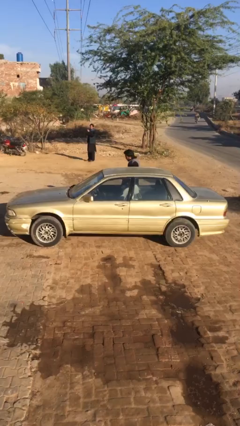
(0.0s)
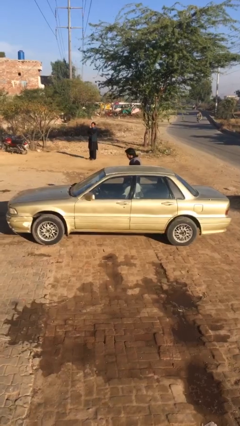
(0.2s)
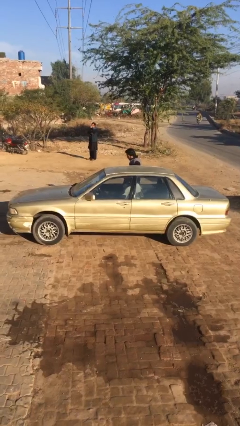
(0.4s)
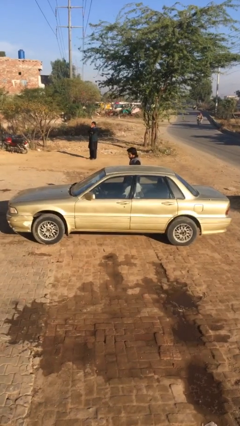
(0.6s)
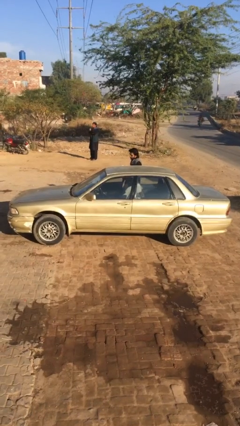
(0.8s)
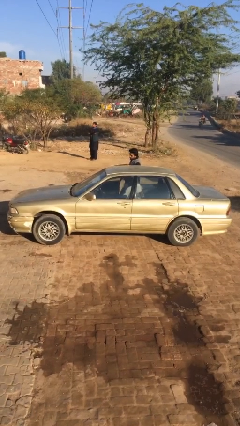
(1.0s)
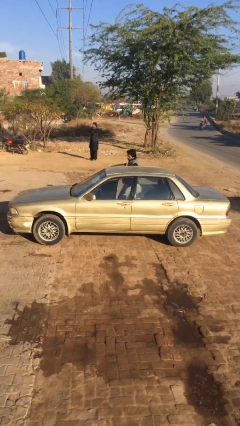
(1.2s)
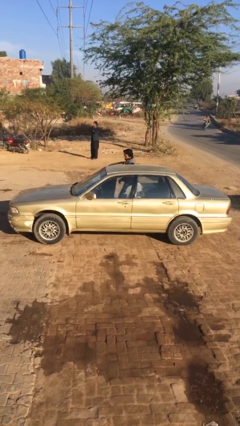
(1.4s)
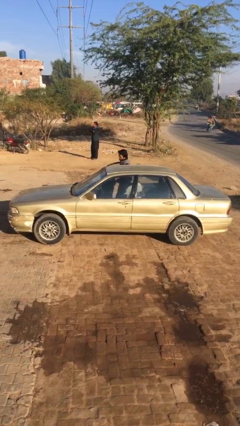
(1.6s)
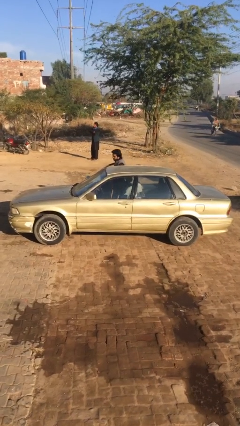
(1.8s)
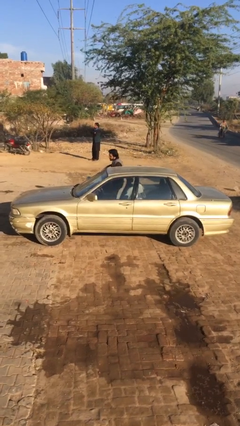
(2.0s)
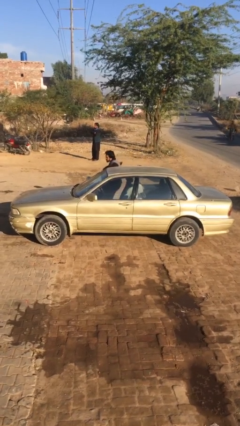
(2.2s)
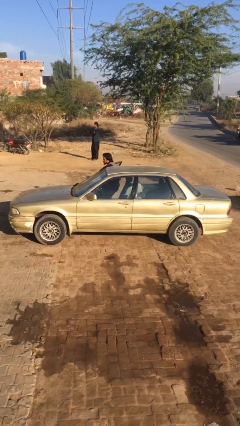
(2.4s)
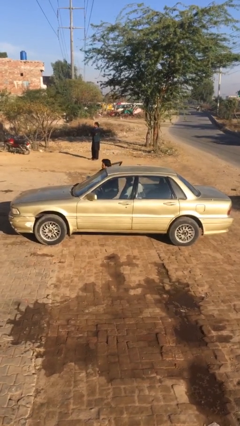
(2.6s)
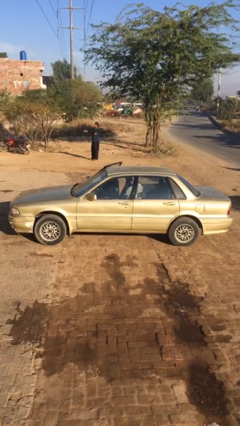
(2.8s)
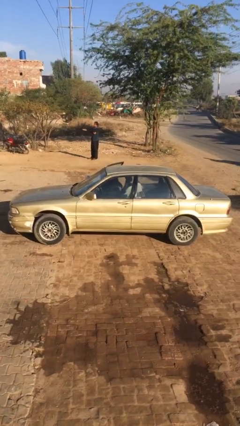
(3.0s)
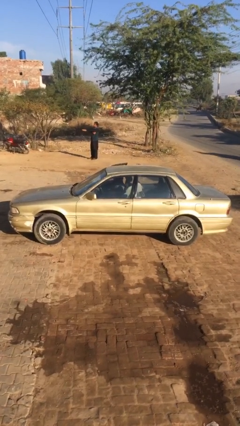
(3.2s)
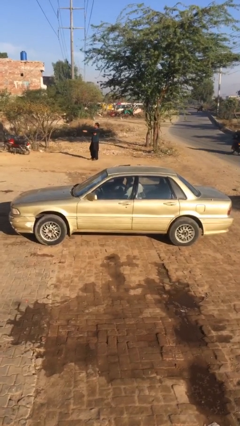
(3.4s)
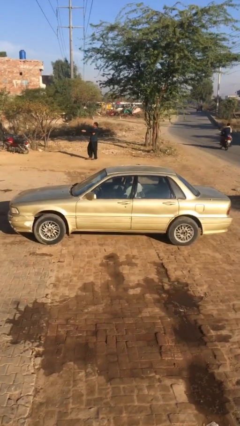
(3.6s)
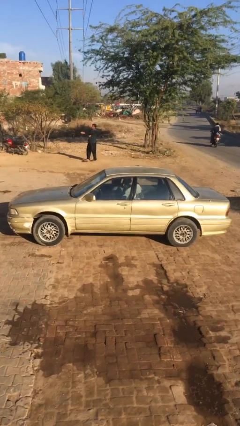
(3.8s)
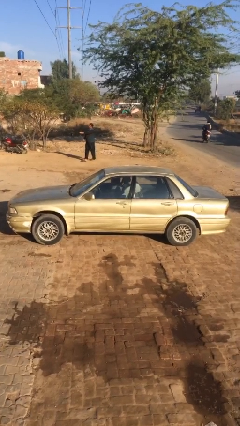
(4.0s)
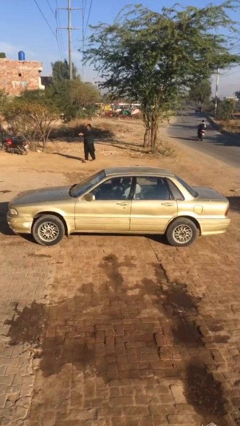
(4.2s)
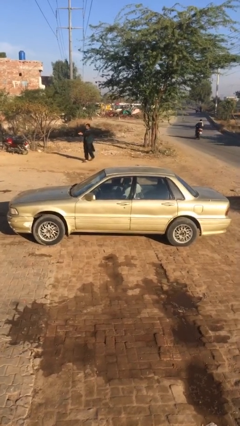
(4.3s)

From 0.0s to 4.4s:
car picks up person

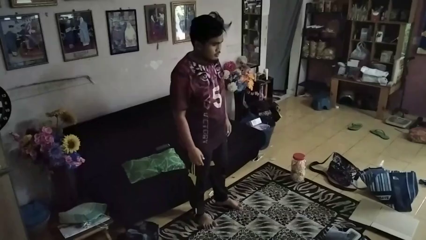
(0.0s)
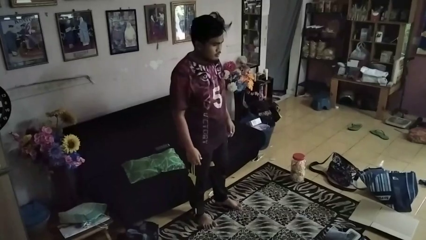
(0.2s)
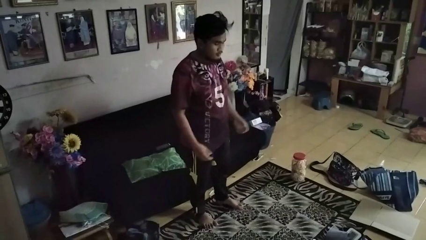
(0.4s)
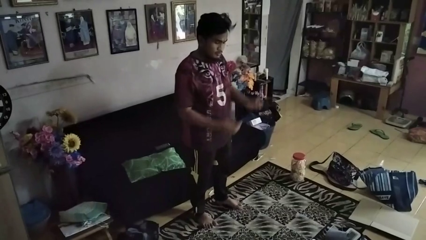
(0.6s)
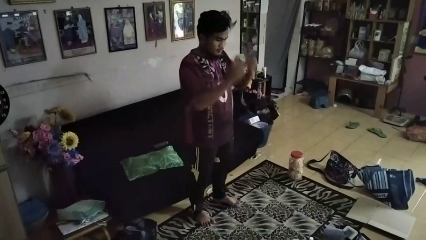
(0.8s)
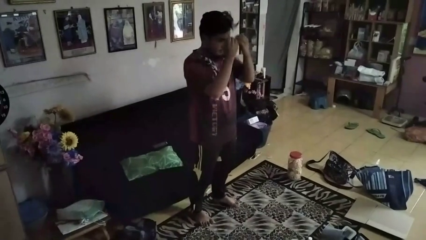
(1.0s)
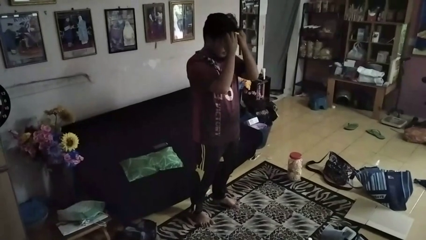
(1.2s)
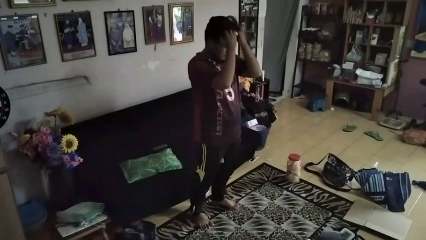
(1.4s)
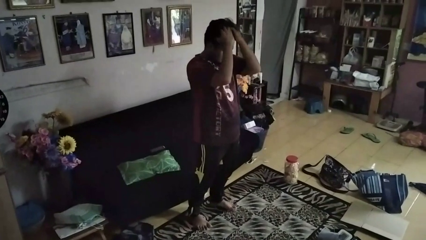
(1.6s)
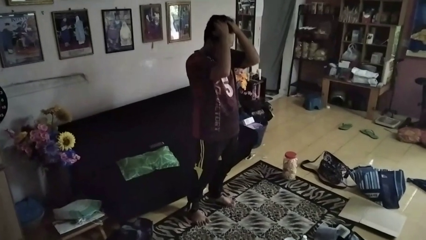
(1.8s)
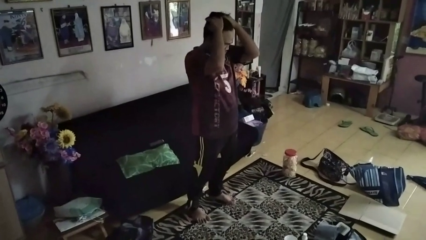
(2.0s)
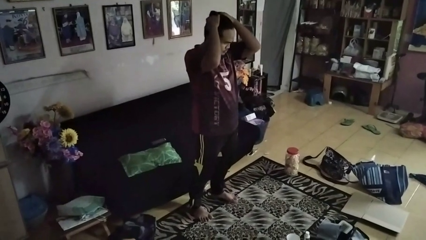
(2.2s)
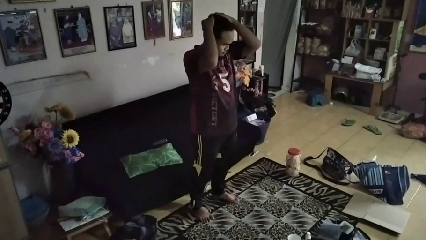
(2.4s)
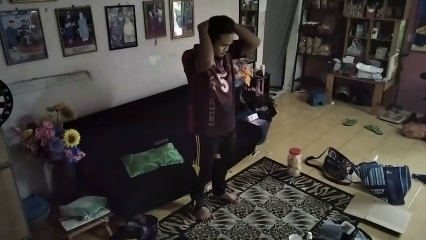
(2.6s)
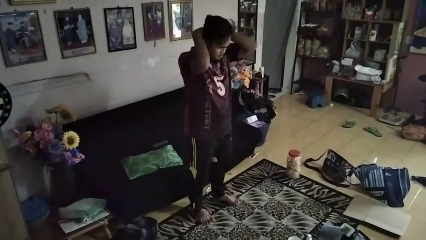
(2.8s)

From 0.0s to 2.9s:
person strokes hair

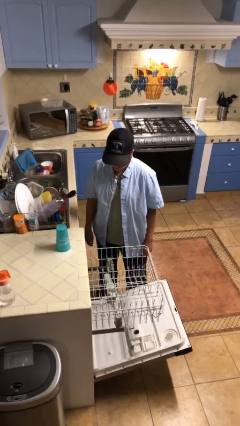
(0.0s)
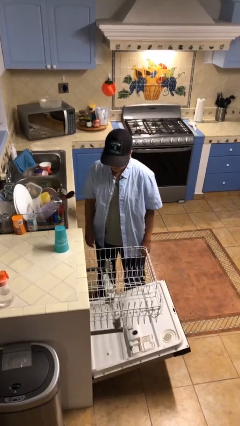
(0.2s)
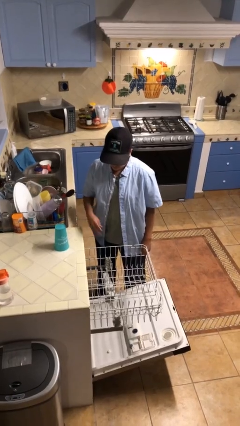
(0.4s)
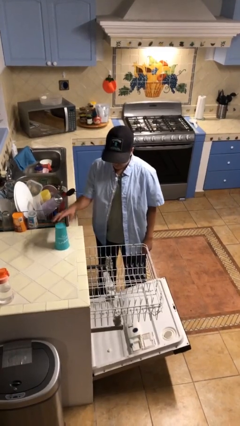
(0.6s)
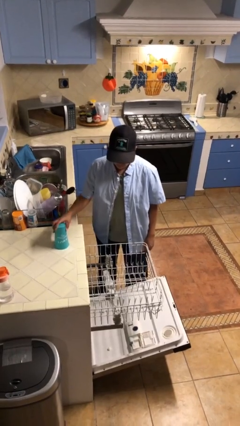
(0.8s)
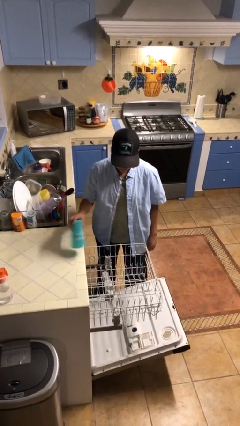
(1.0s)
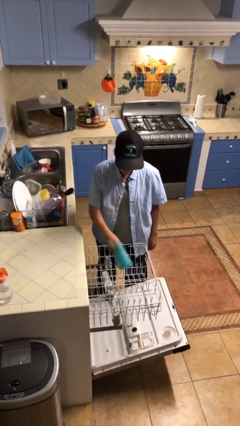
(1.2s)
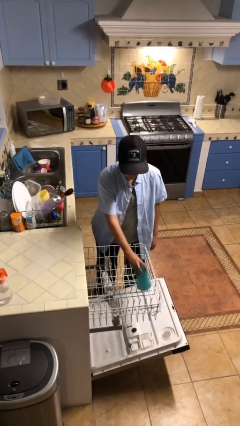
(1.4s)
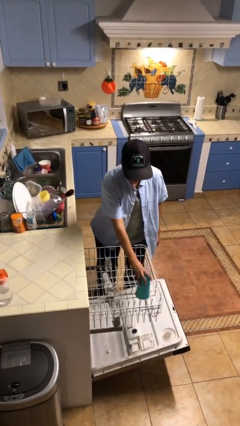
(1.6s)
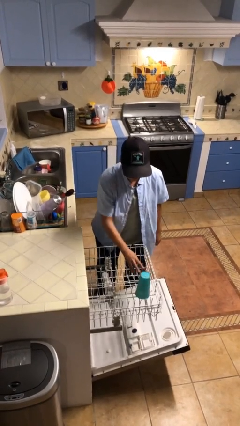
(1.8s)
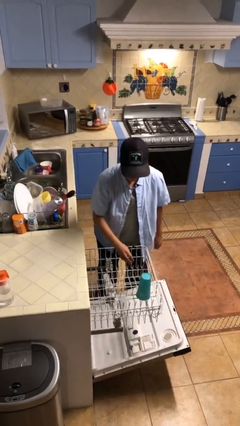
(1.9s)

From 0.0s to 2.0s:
person loads dishwasher

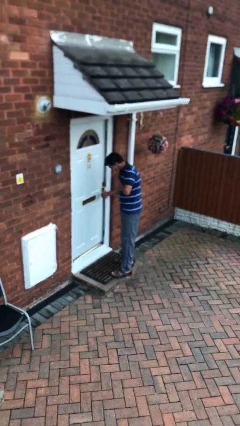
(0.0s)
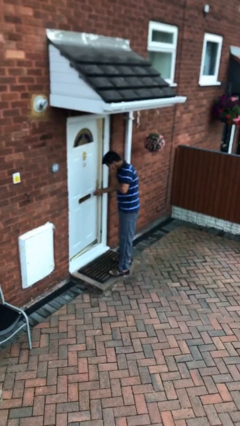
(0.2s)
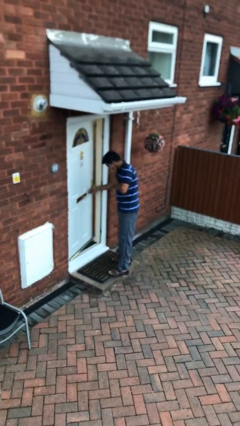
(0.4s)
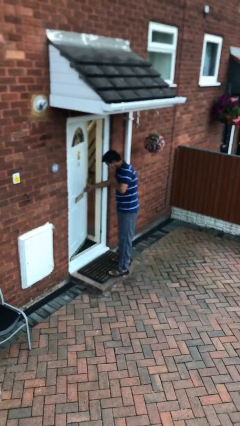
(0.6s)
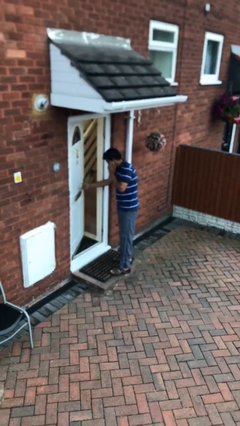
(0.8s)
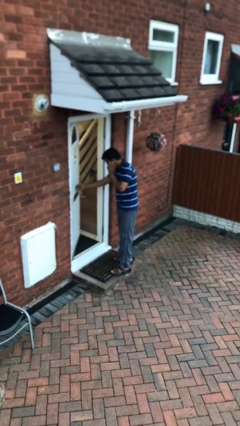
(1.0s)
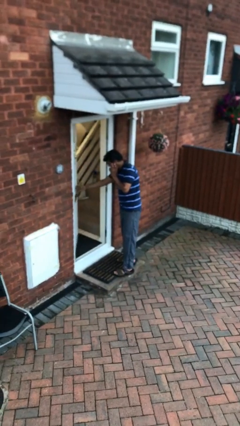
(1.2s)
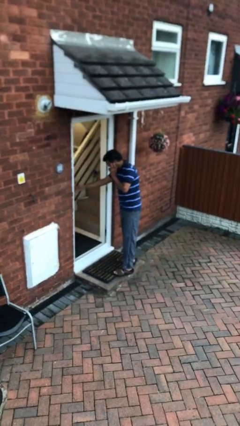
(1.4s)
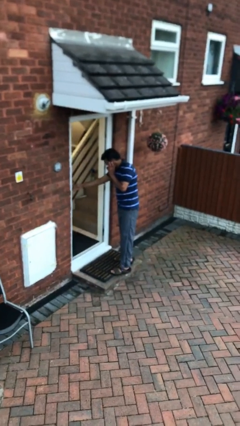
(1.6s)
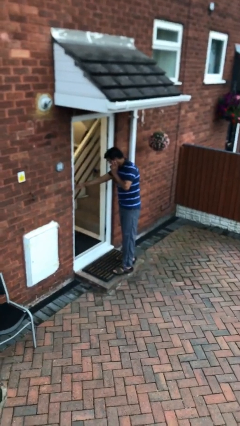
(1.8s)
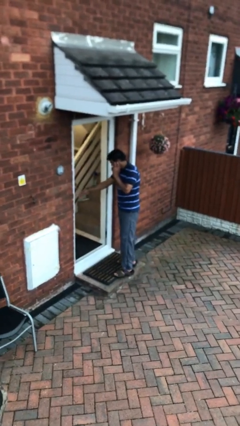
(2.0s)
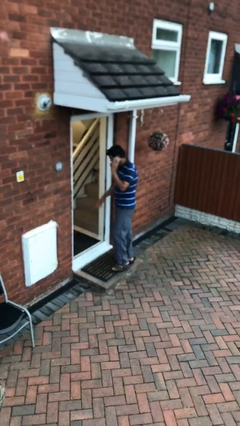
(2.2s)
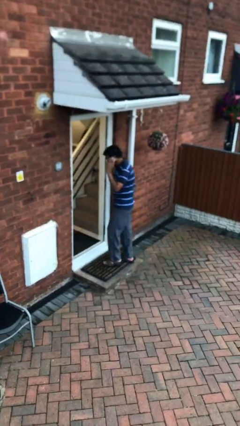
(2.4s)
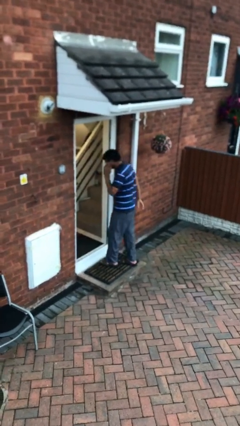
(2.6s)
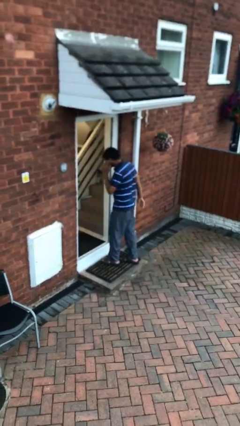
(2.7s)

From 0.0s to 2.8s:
person opens facility door

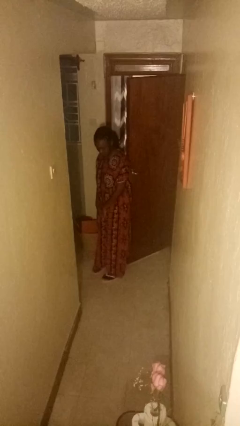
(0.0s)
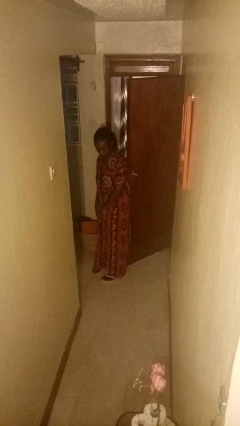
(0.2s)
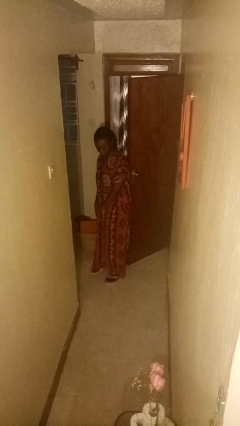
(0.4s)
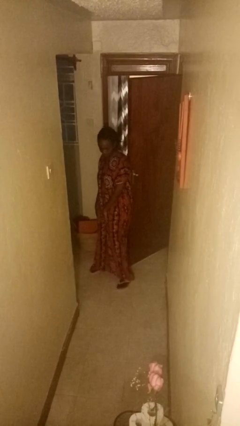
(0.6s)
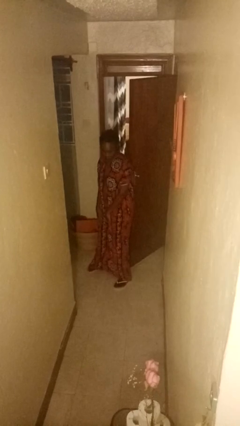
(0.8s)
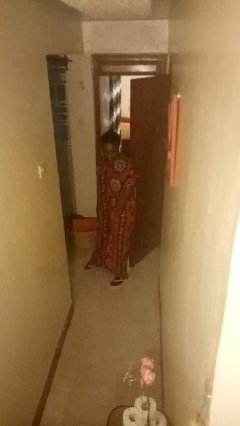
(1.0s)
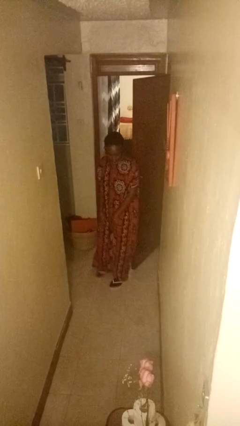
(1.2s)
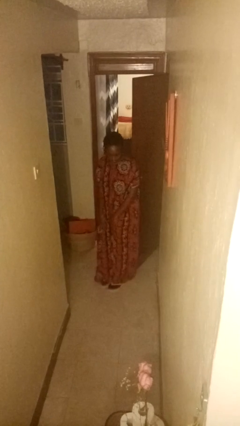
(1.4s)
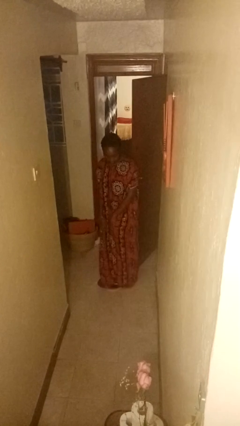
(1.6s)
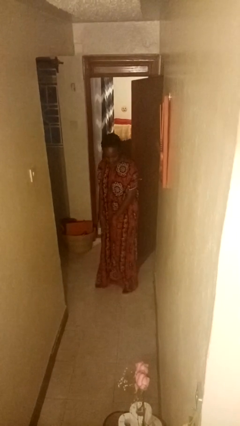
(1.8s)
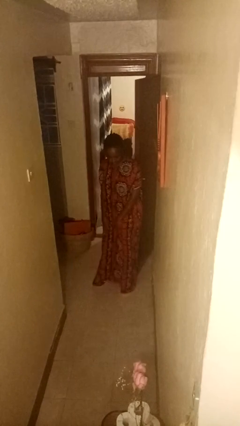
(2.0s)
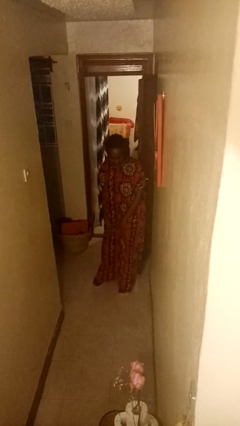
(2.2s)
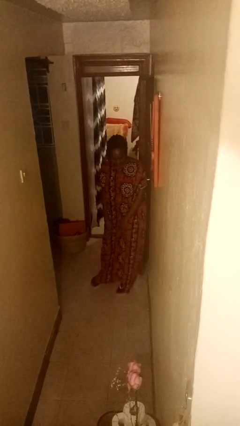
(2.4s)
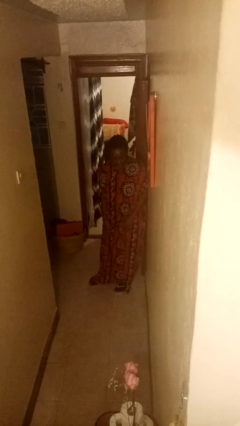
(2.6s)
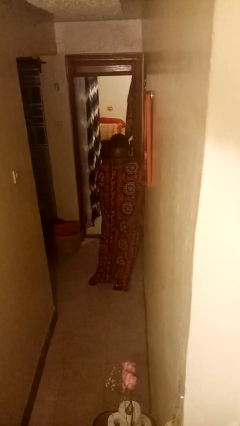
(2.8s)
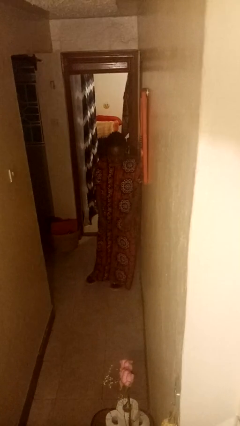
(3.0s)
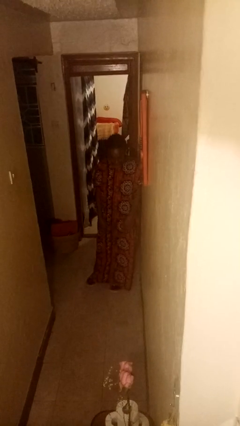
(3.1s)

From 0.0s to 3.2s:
person closes door with hip

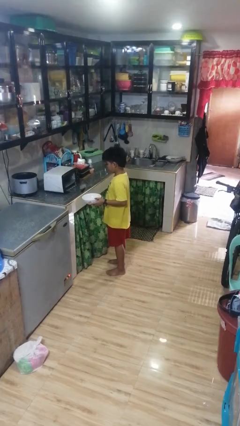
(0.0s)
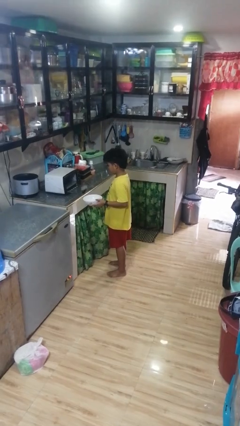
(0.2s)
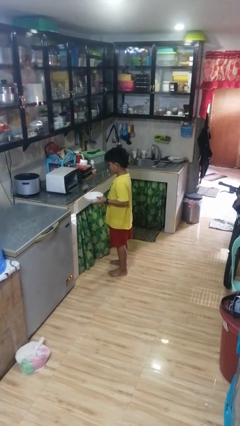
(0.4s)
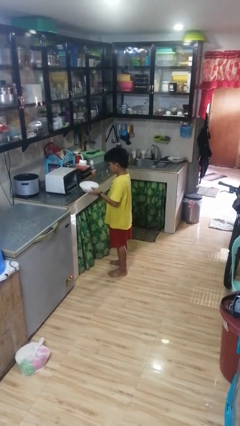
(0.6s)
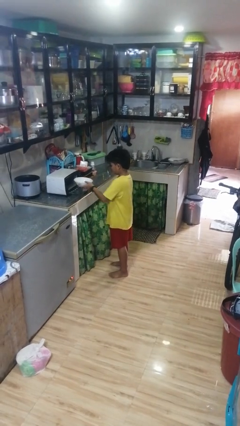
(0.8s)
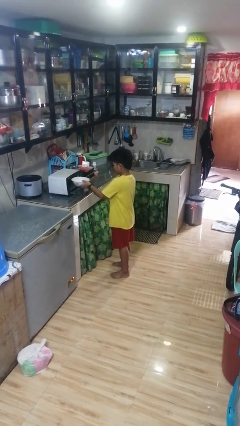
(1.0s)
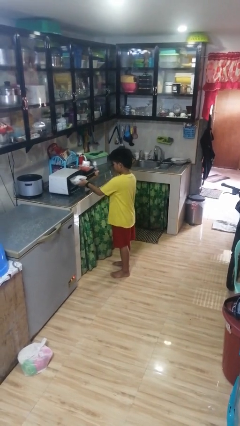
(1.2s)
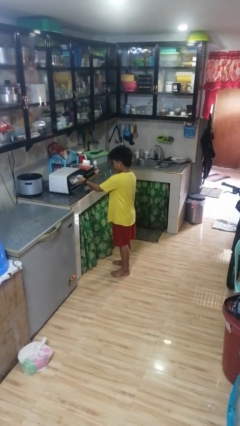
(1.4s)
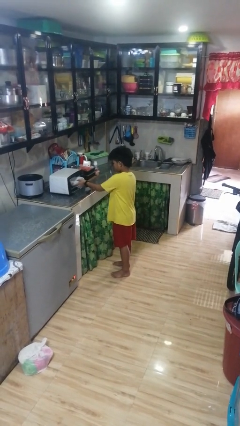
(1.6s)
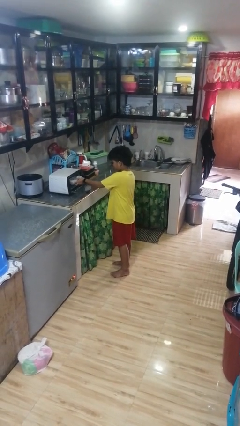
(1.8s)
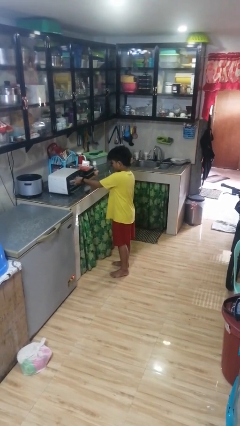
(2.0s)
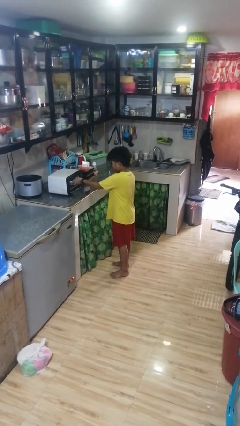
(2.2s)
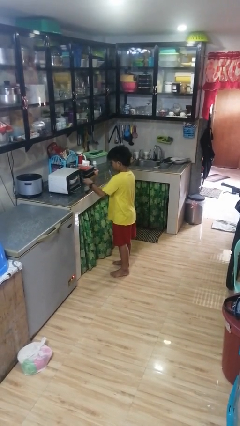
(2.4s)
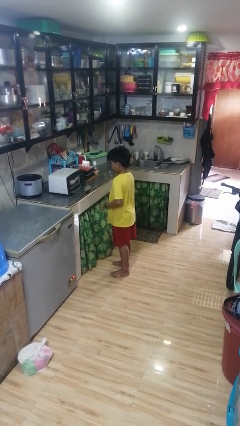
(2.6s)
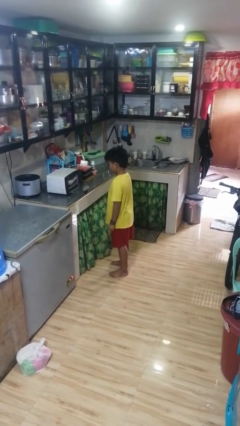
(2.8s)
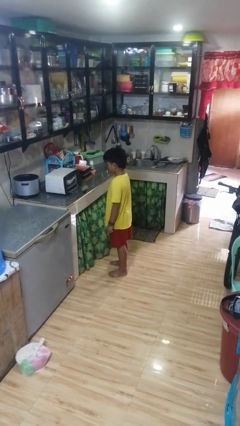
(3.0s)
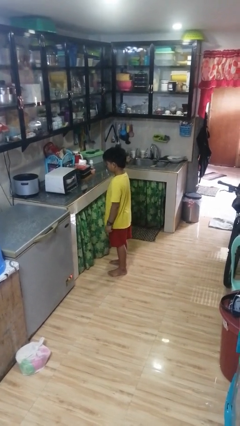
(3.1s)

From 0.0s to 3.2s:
person puts object into microwave
